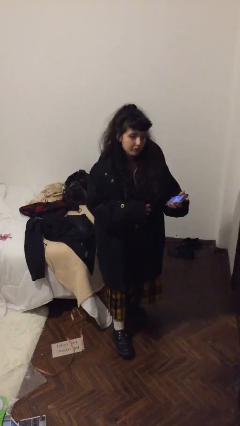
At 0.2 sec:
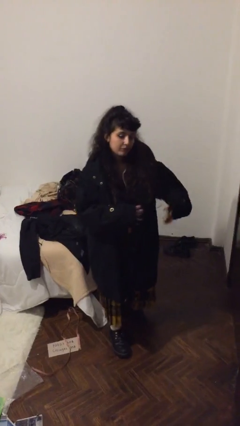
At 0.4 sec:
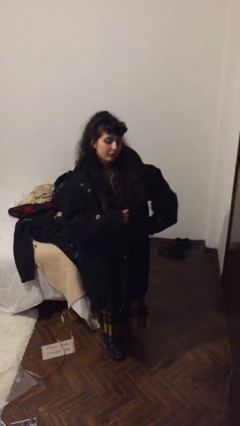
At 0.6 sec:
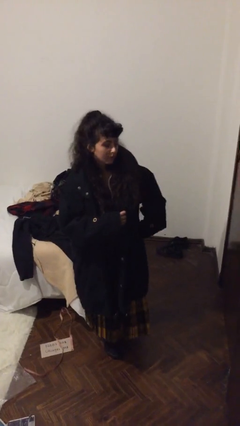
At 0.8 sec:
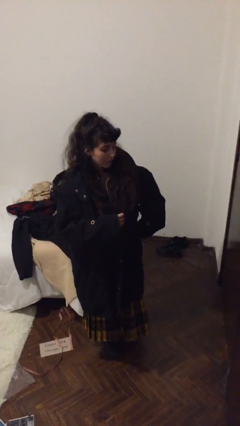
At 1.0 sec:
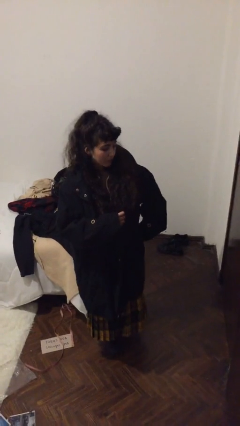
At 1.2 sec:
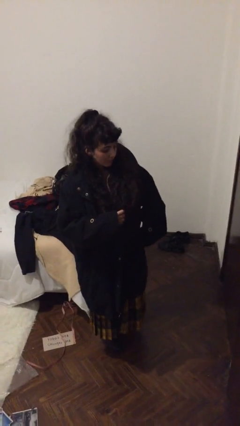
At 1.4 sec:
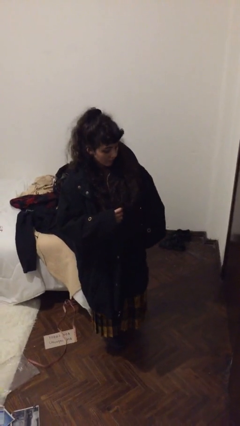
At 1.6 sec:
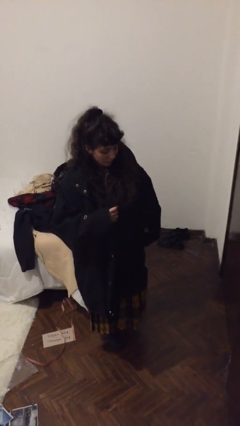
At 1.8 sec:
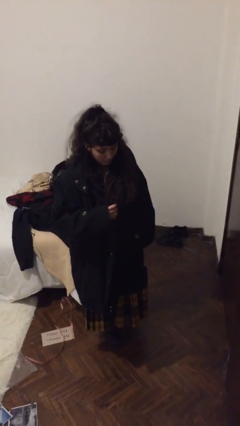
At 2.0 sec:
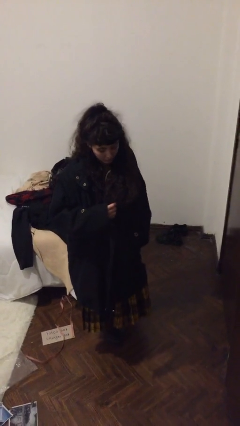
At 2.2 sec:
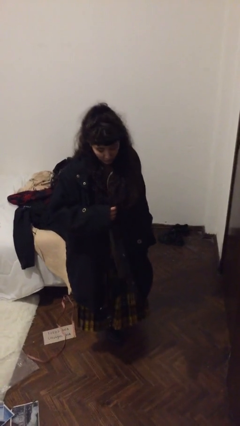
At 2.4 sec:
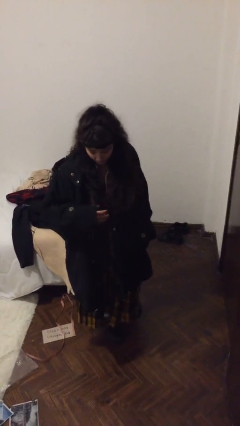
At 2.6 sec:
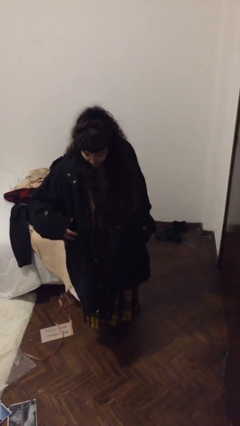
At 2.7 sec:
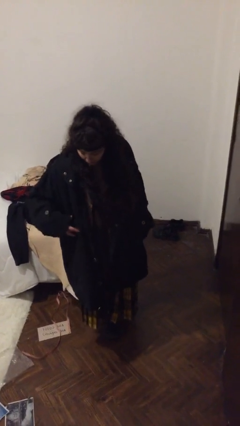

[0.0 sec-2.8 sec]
person puts phone into pocket

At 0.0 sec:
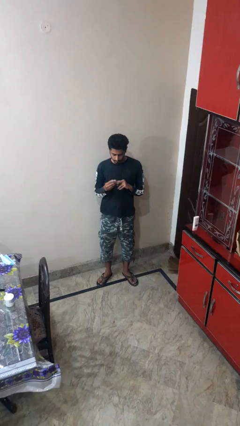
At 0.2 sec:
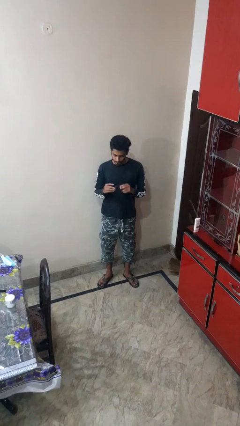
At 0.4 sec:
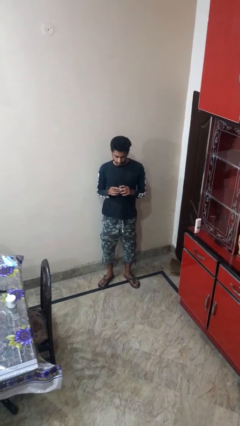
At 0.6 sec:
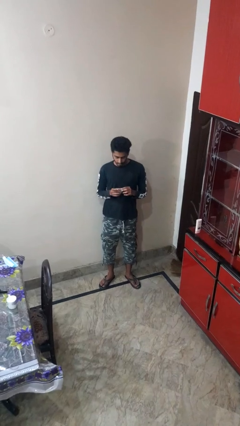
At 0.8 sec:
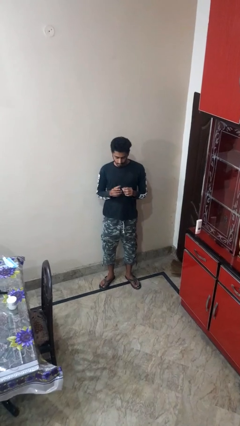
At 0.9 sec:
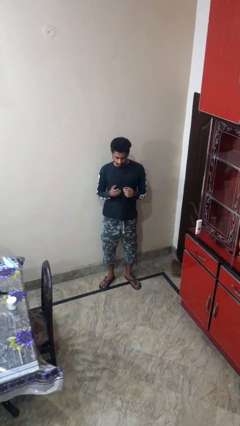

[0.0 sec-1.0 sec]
person takes off ring

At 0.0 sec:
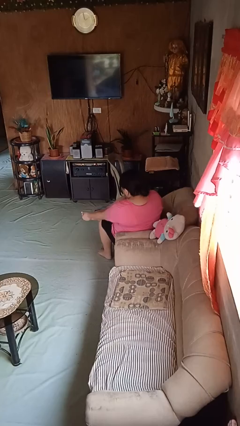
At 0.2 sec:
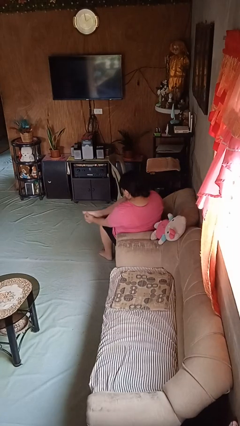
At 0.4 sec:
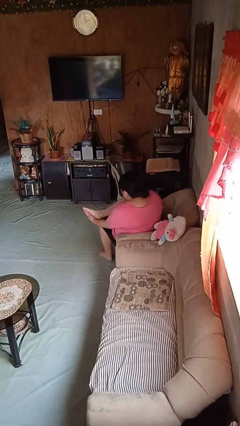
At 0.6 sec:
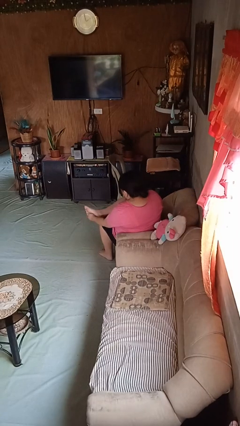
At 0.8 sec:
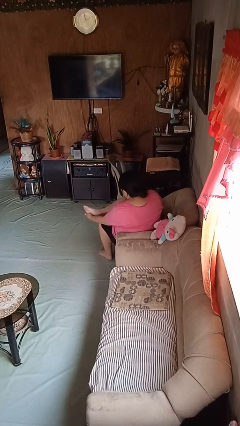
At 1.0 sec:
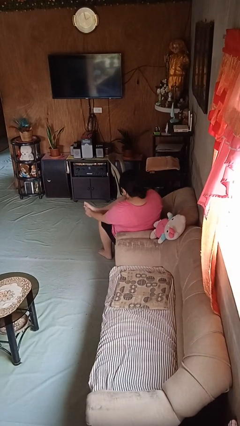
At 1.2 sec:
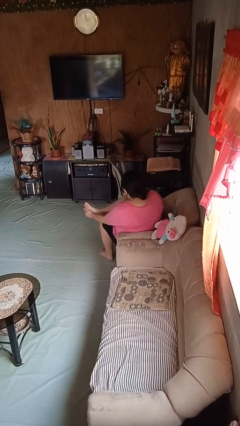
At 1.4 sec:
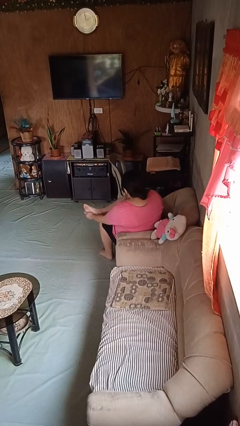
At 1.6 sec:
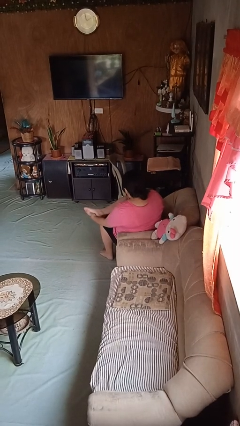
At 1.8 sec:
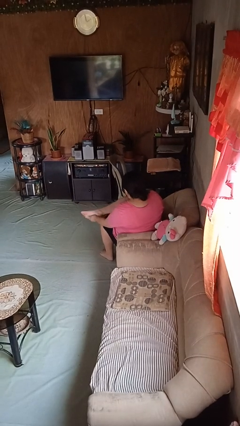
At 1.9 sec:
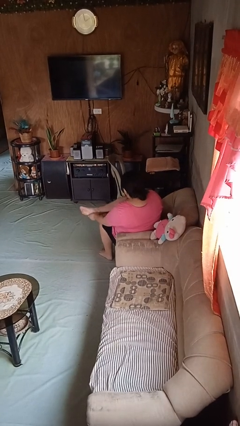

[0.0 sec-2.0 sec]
person rubs foot

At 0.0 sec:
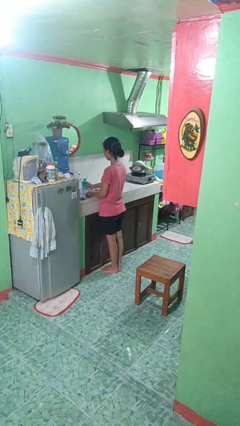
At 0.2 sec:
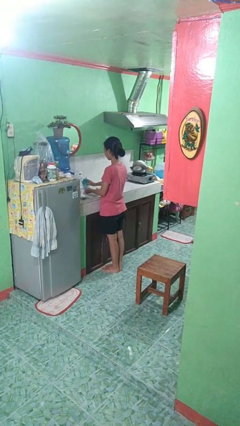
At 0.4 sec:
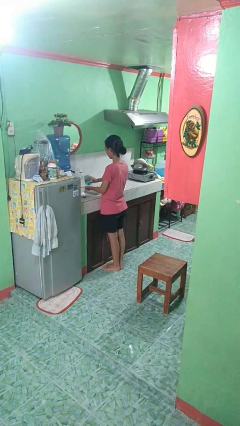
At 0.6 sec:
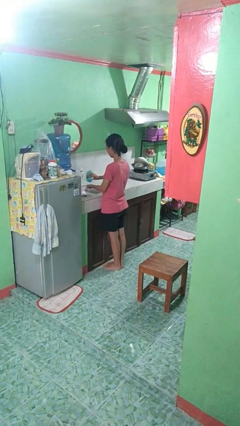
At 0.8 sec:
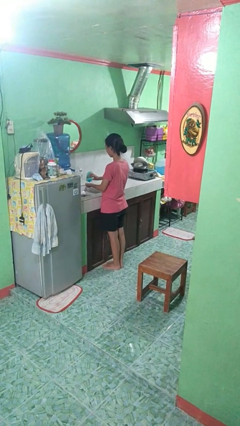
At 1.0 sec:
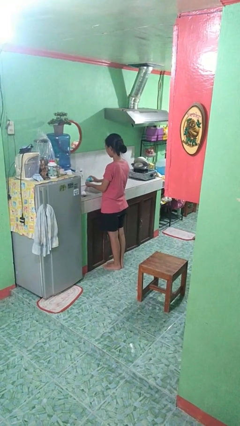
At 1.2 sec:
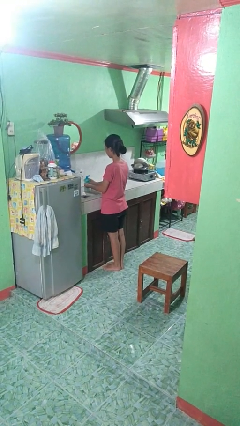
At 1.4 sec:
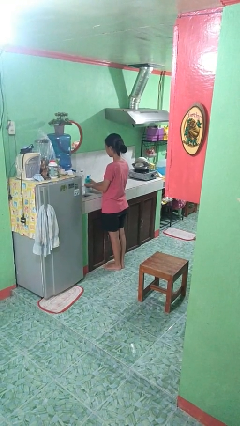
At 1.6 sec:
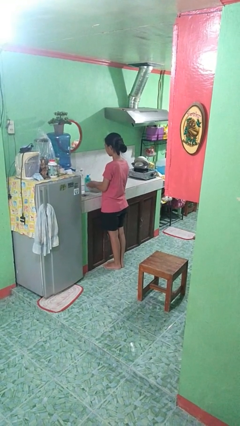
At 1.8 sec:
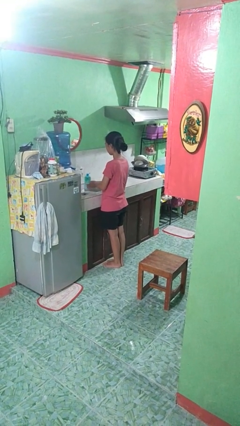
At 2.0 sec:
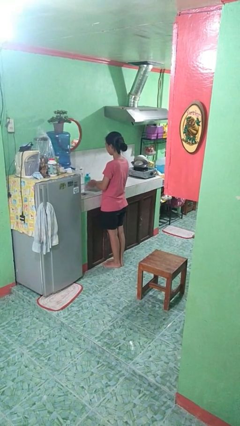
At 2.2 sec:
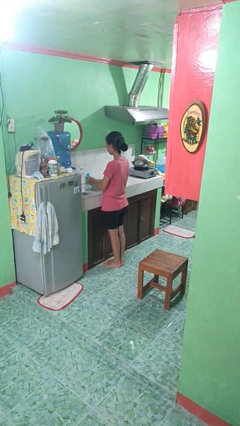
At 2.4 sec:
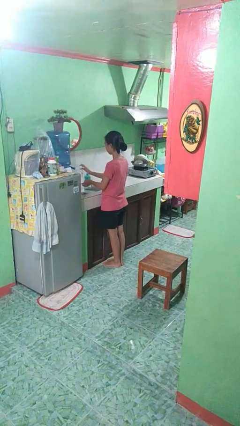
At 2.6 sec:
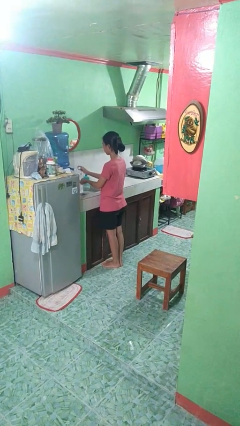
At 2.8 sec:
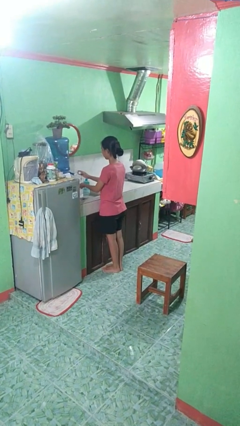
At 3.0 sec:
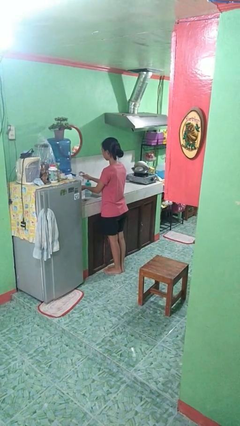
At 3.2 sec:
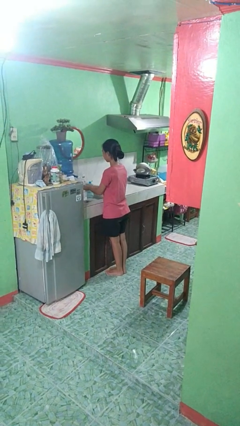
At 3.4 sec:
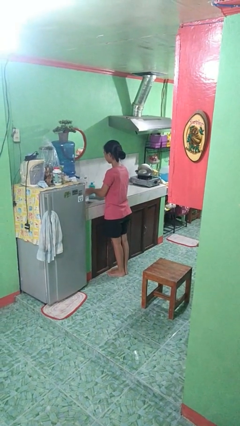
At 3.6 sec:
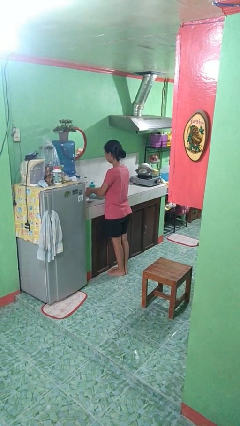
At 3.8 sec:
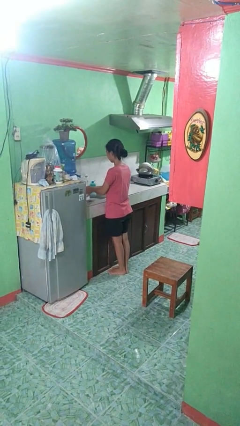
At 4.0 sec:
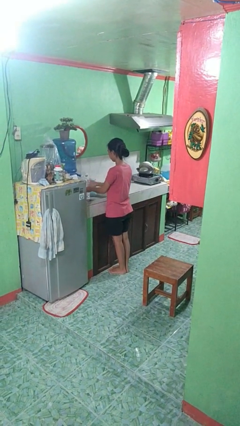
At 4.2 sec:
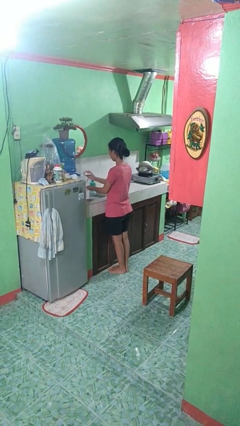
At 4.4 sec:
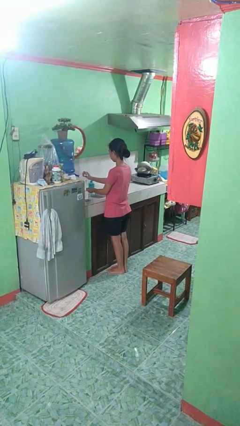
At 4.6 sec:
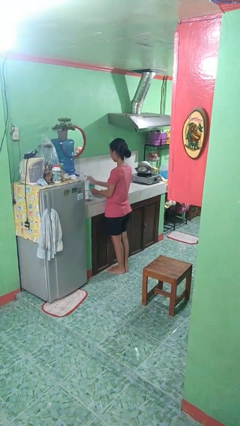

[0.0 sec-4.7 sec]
person washes hands

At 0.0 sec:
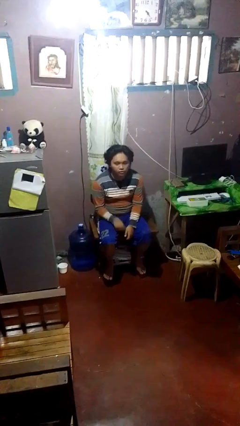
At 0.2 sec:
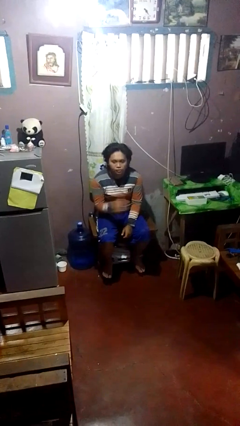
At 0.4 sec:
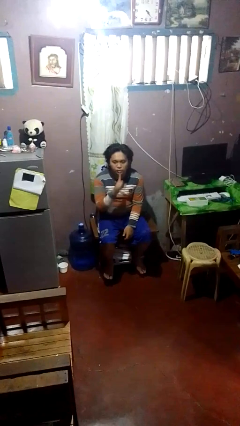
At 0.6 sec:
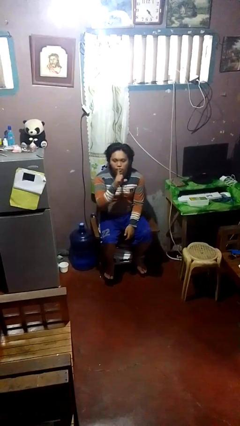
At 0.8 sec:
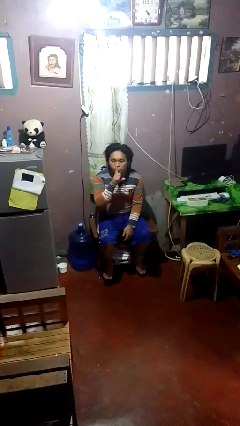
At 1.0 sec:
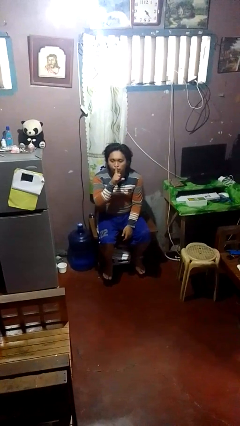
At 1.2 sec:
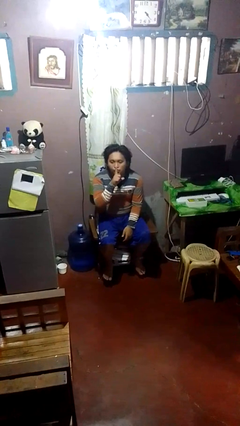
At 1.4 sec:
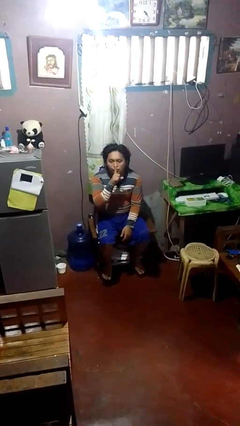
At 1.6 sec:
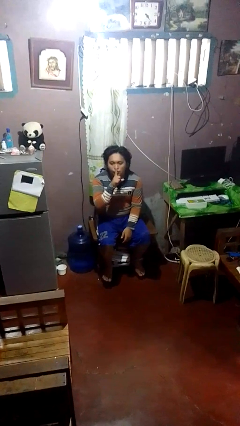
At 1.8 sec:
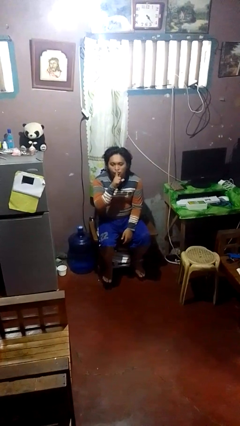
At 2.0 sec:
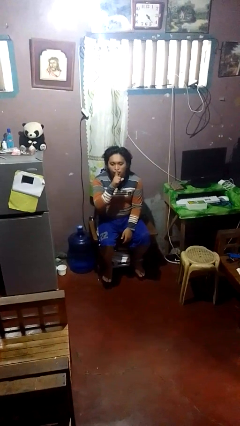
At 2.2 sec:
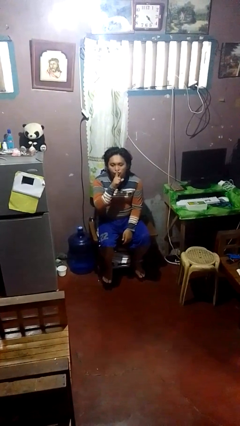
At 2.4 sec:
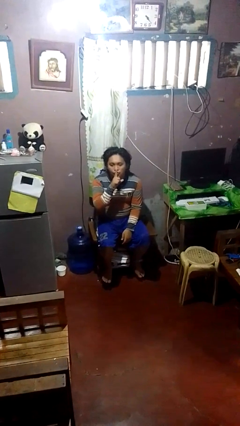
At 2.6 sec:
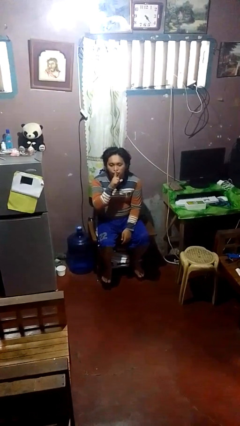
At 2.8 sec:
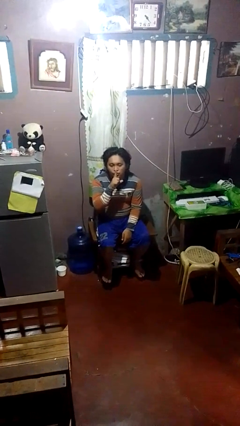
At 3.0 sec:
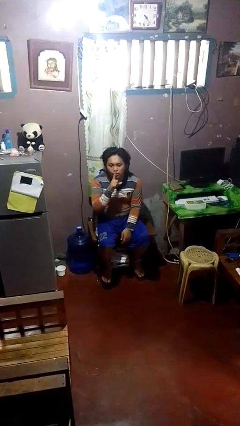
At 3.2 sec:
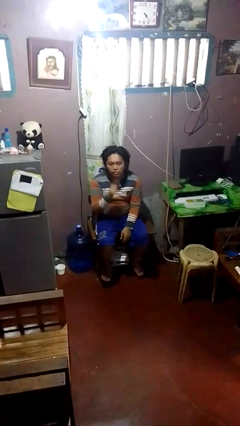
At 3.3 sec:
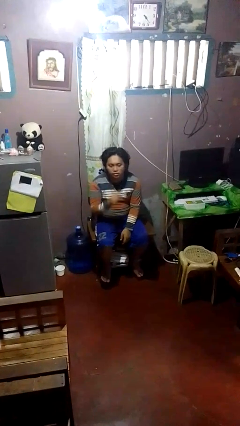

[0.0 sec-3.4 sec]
person gestures be quiet

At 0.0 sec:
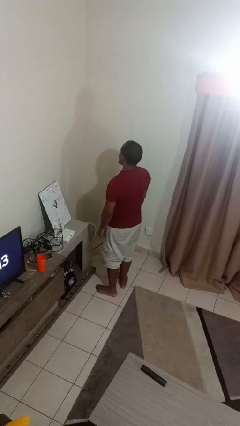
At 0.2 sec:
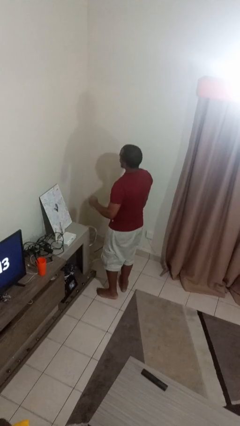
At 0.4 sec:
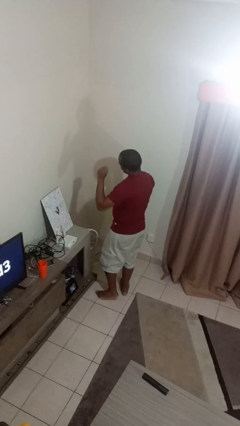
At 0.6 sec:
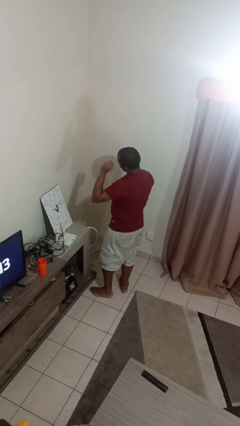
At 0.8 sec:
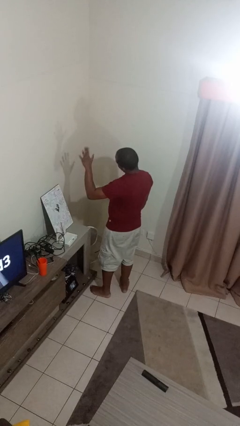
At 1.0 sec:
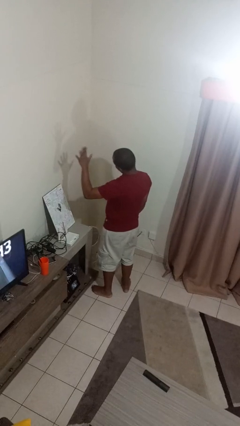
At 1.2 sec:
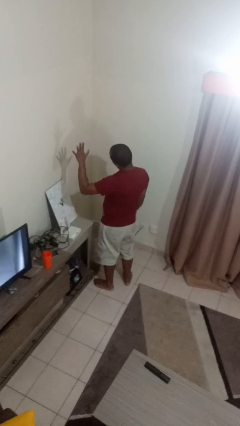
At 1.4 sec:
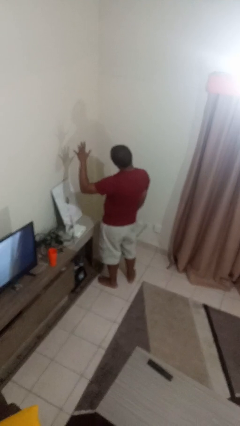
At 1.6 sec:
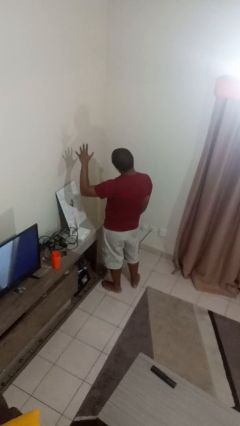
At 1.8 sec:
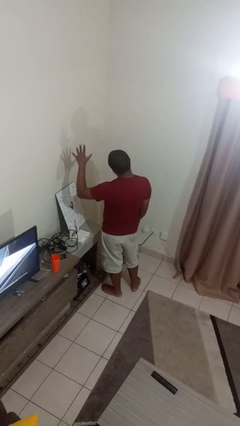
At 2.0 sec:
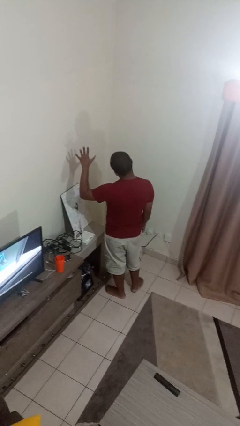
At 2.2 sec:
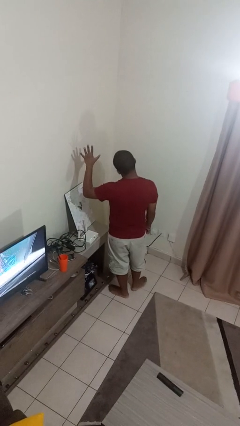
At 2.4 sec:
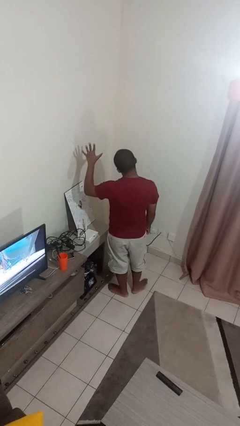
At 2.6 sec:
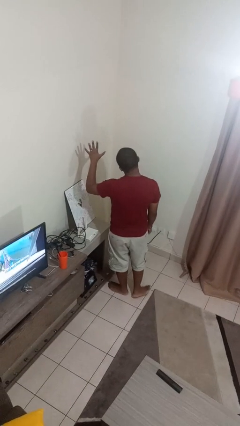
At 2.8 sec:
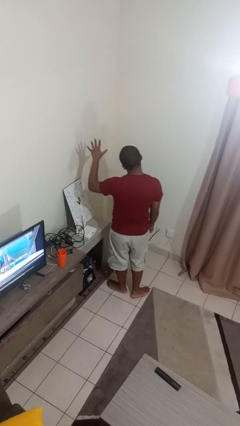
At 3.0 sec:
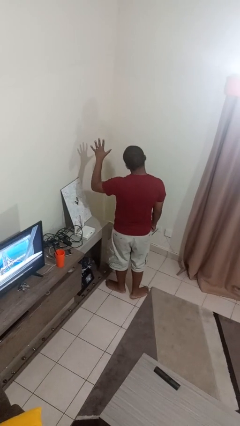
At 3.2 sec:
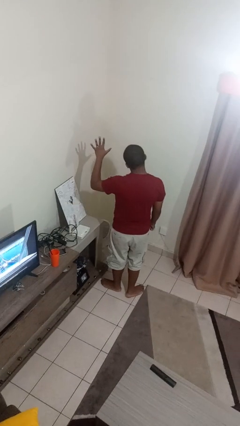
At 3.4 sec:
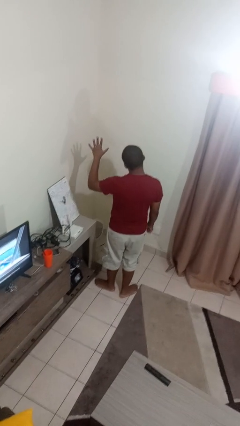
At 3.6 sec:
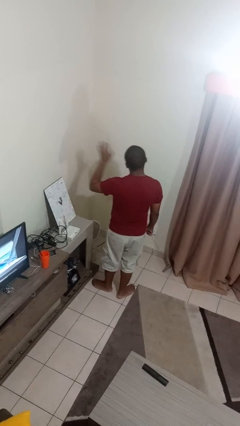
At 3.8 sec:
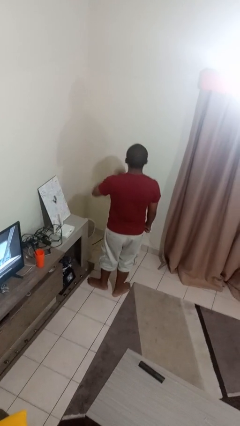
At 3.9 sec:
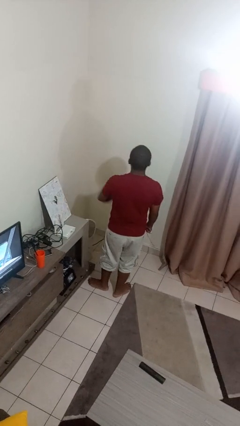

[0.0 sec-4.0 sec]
person gestures number five
